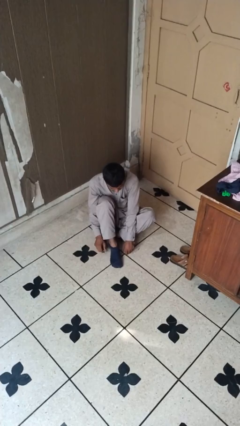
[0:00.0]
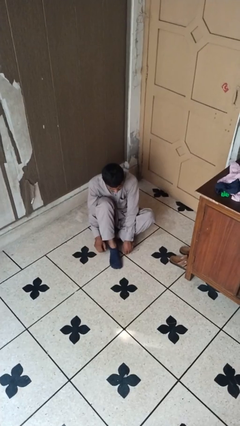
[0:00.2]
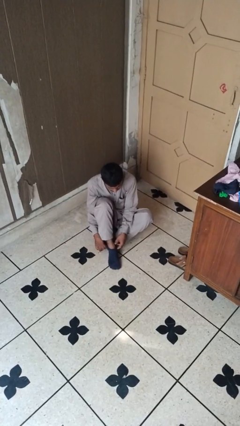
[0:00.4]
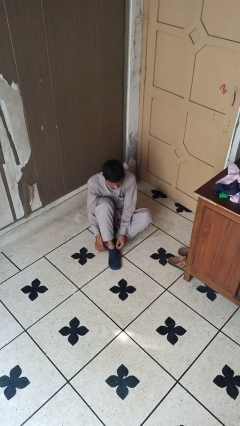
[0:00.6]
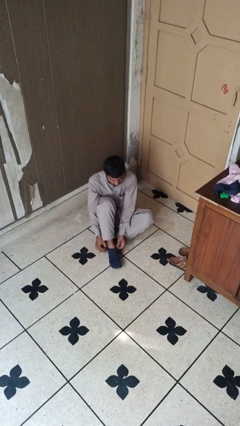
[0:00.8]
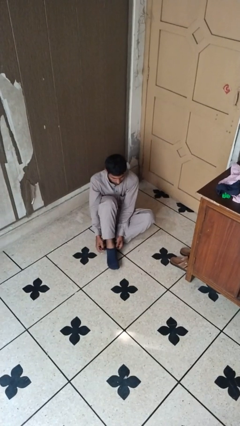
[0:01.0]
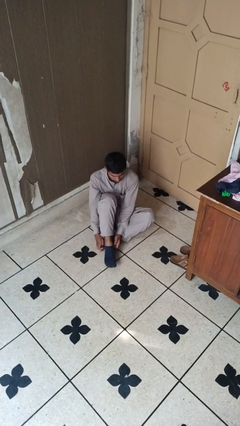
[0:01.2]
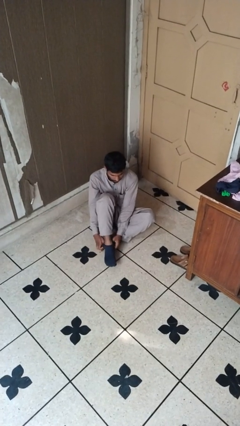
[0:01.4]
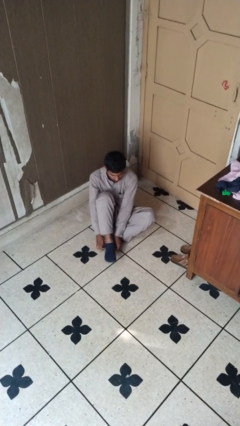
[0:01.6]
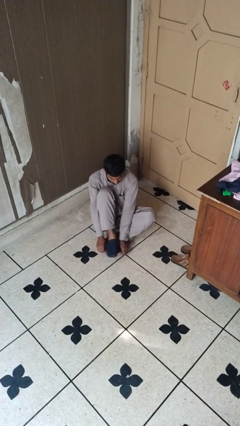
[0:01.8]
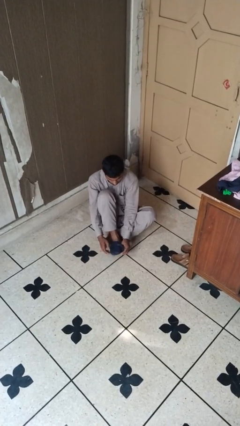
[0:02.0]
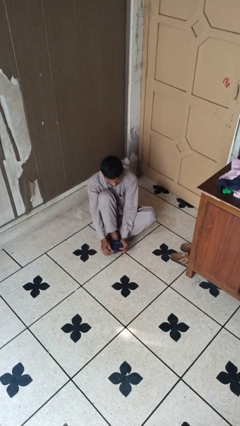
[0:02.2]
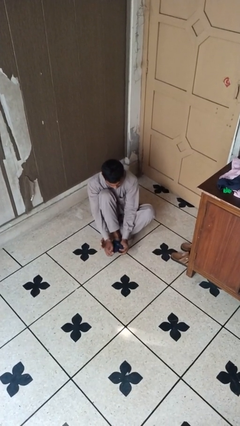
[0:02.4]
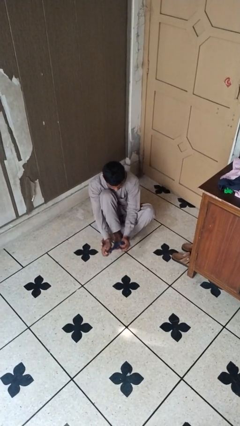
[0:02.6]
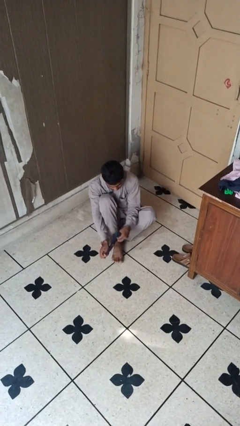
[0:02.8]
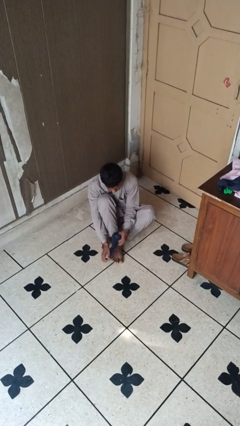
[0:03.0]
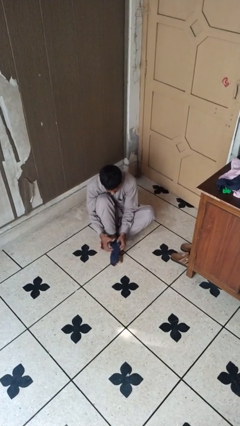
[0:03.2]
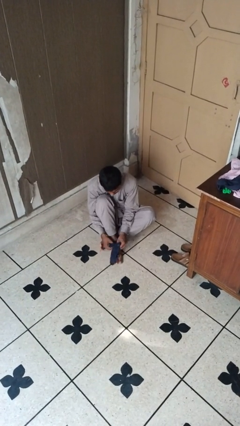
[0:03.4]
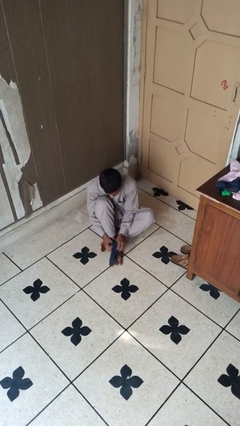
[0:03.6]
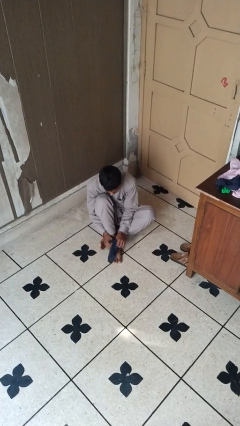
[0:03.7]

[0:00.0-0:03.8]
person takes off socks

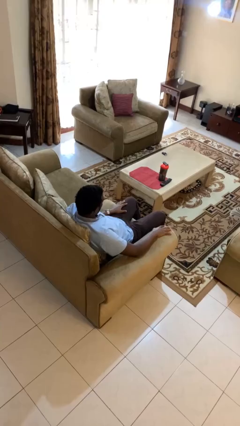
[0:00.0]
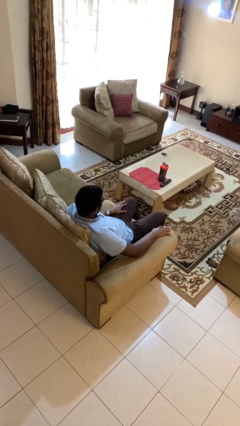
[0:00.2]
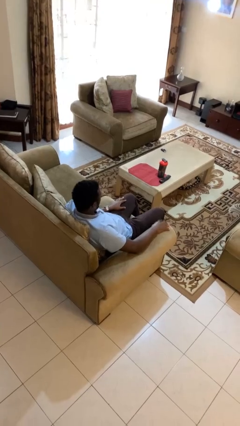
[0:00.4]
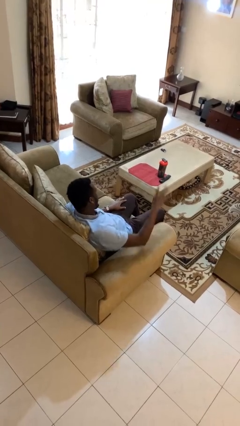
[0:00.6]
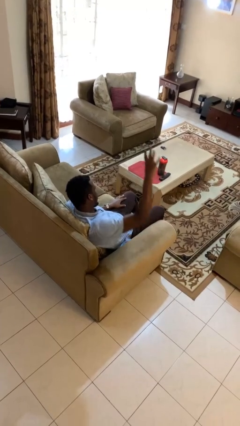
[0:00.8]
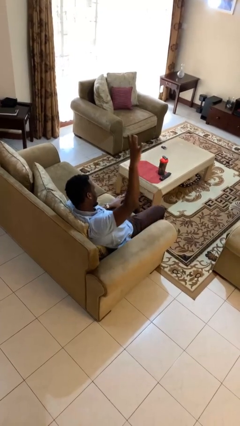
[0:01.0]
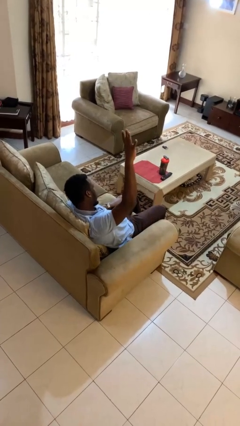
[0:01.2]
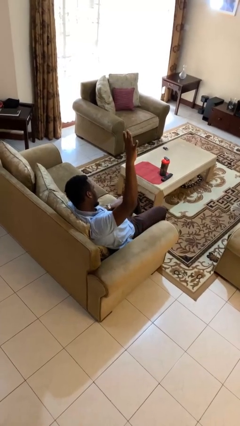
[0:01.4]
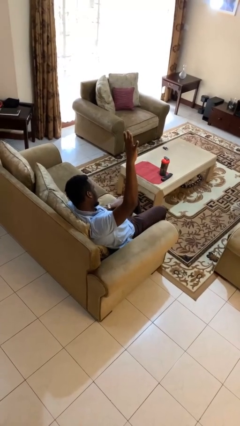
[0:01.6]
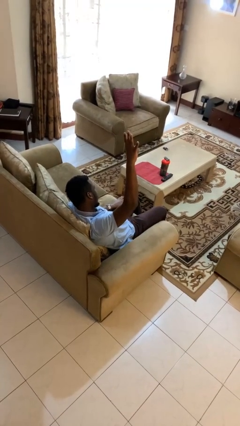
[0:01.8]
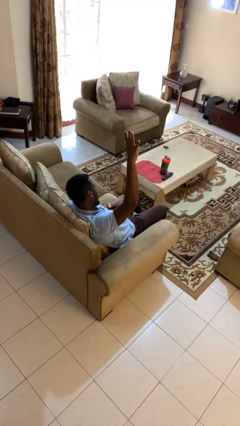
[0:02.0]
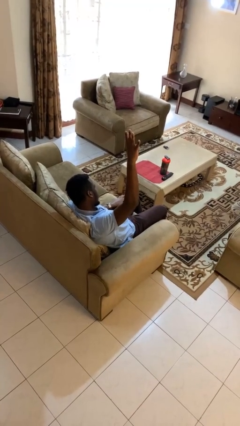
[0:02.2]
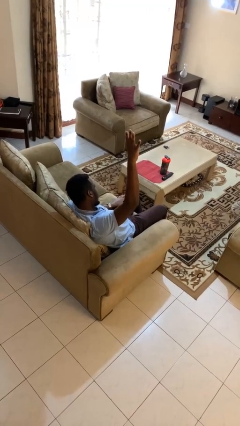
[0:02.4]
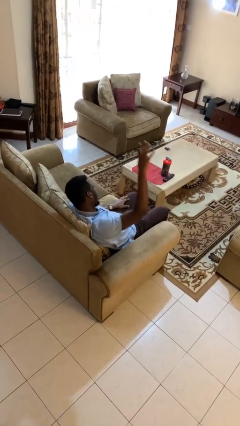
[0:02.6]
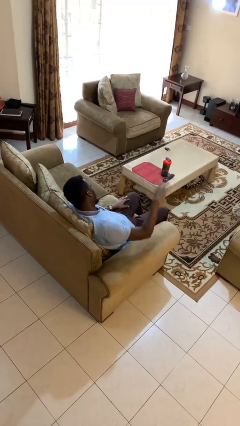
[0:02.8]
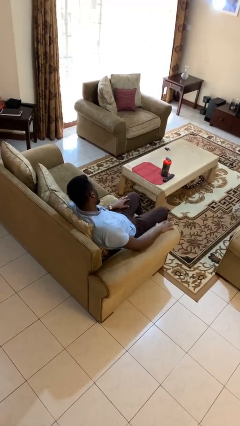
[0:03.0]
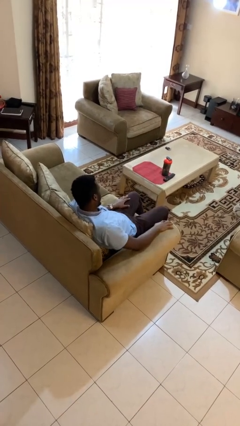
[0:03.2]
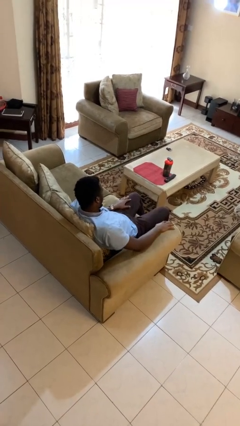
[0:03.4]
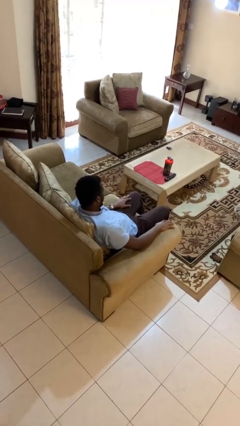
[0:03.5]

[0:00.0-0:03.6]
person gestures number four

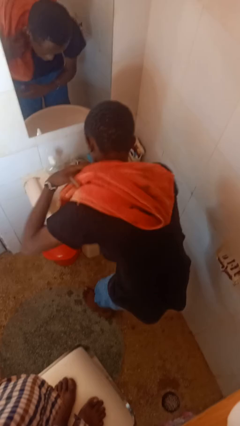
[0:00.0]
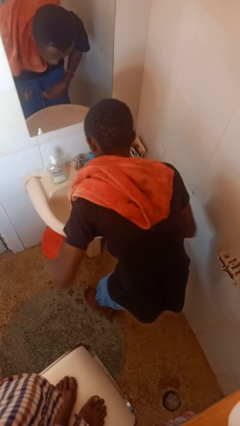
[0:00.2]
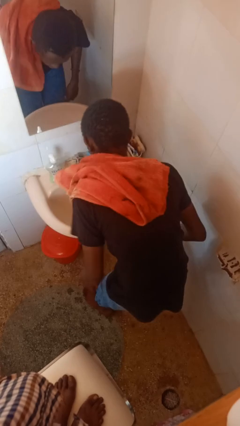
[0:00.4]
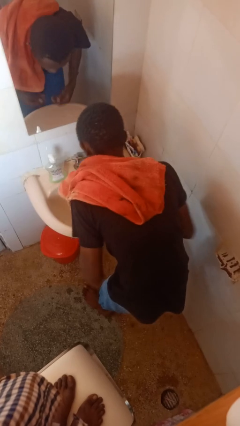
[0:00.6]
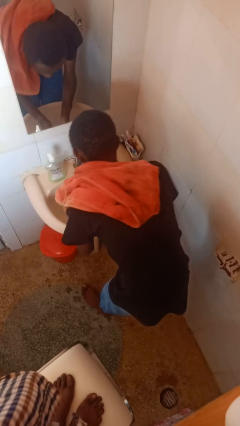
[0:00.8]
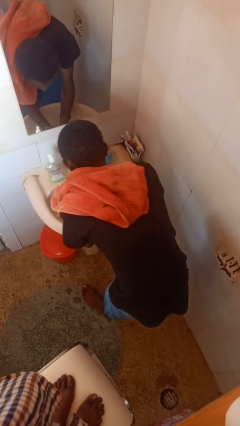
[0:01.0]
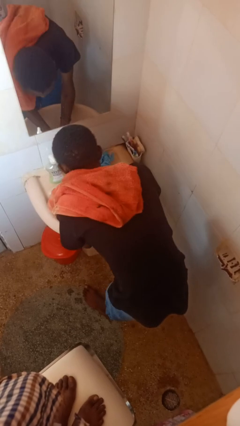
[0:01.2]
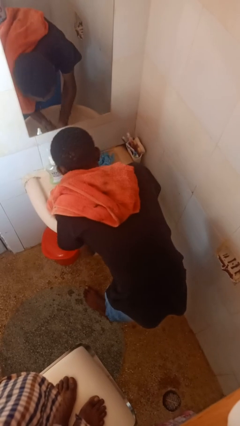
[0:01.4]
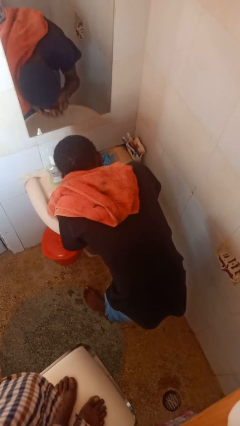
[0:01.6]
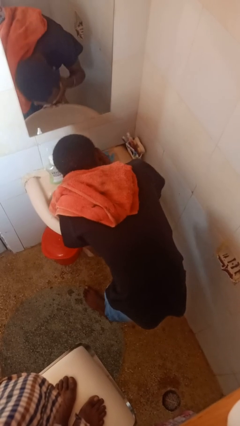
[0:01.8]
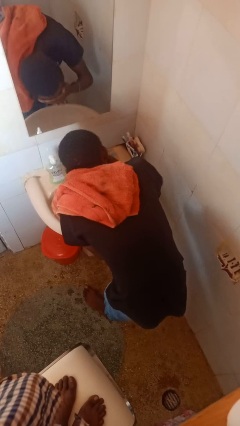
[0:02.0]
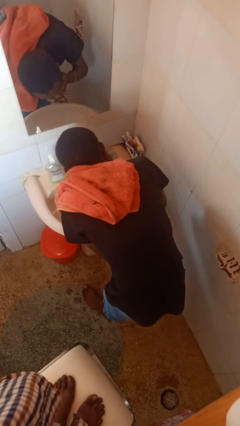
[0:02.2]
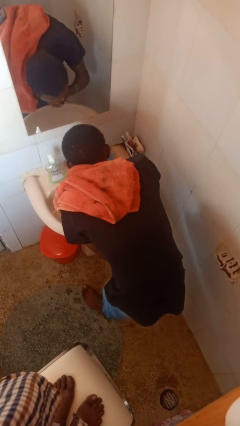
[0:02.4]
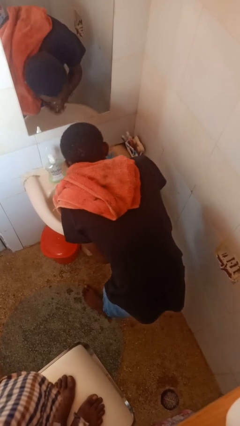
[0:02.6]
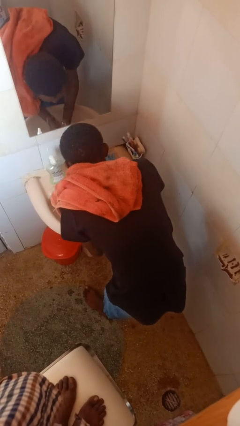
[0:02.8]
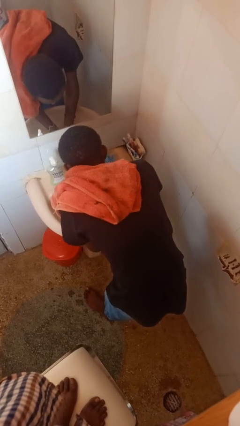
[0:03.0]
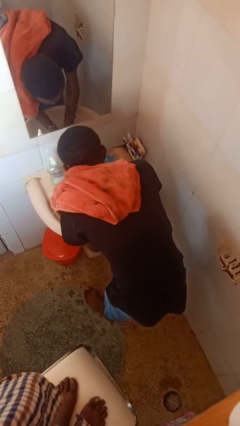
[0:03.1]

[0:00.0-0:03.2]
person washes face

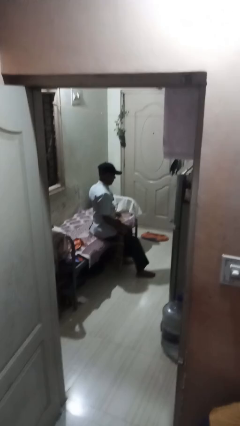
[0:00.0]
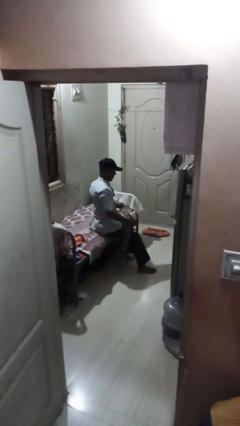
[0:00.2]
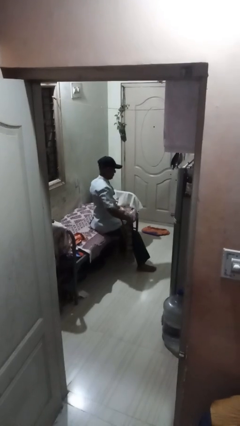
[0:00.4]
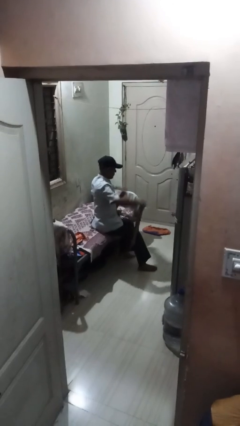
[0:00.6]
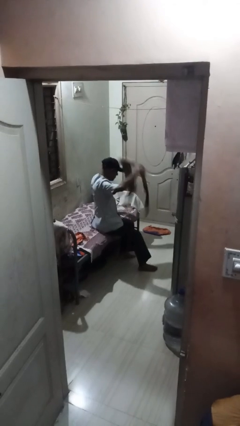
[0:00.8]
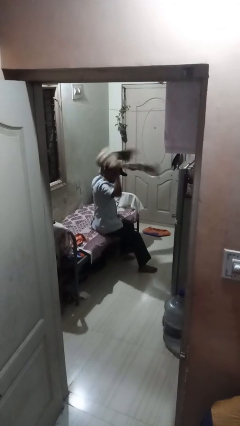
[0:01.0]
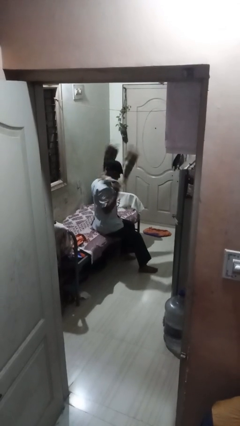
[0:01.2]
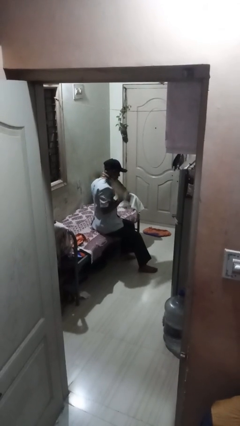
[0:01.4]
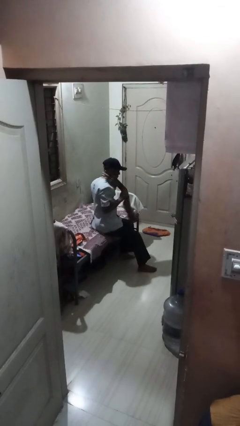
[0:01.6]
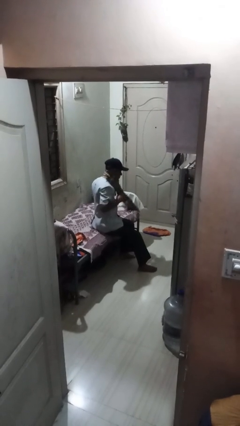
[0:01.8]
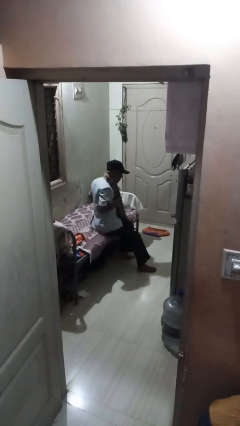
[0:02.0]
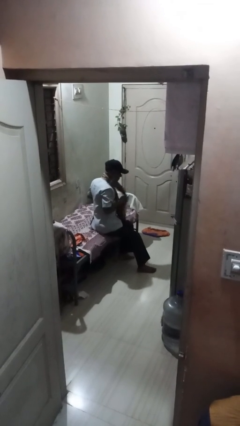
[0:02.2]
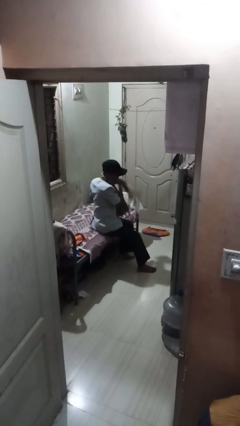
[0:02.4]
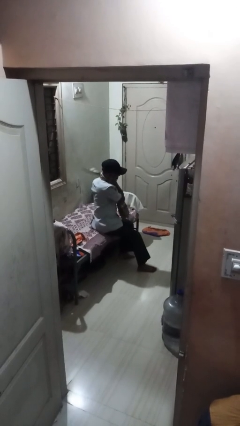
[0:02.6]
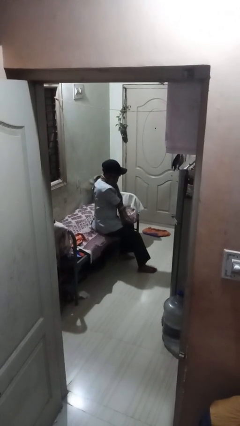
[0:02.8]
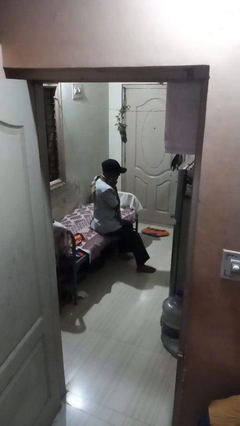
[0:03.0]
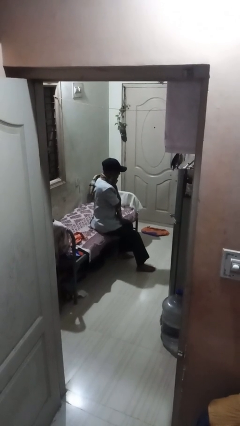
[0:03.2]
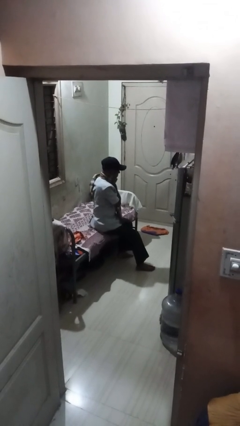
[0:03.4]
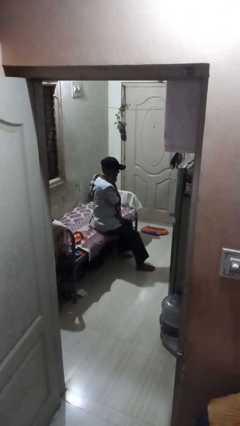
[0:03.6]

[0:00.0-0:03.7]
person puts on scarf

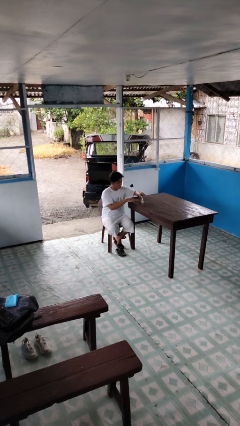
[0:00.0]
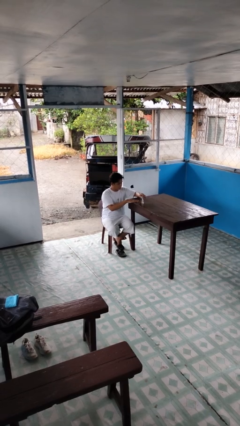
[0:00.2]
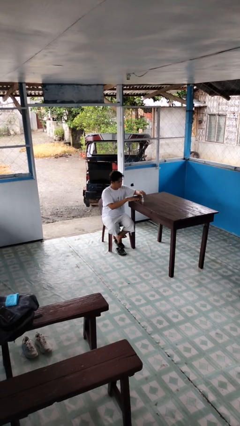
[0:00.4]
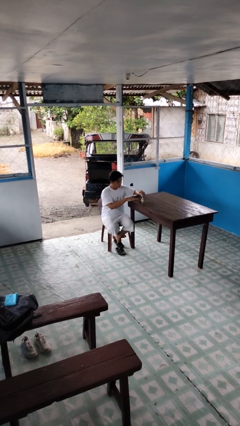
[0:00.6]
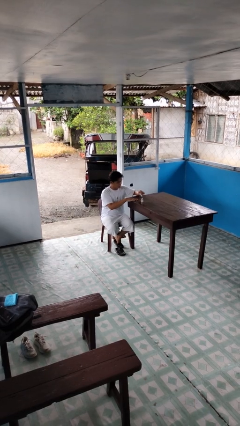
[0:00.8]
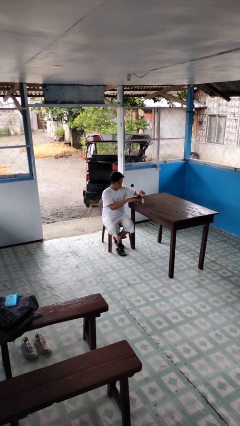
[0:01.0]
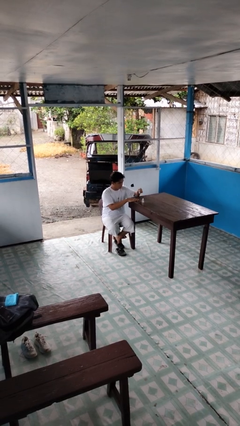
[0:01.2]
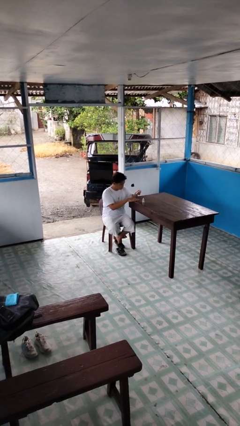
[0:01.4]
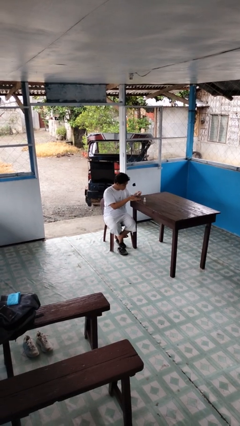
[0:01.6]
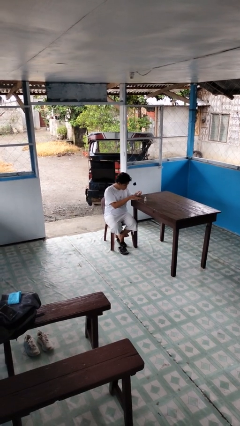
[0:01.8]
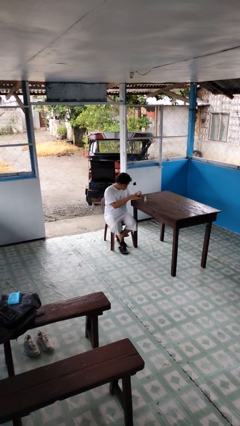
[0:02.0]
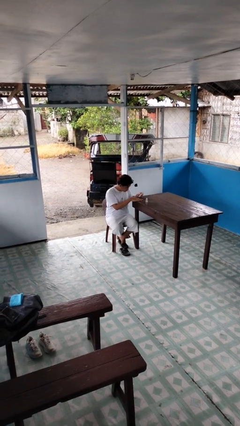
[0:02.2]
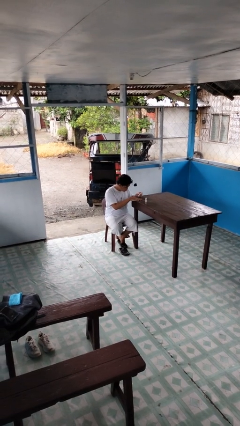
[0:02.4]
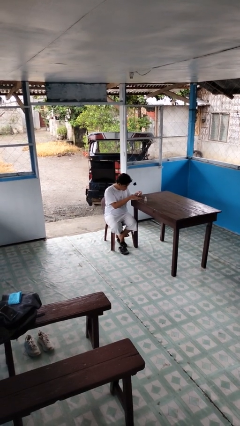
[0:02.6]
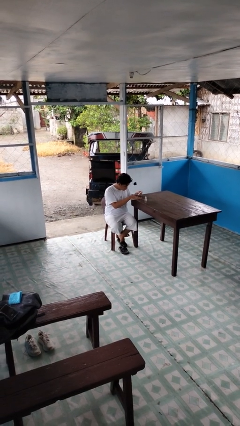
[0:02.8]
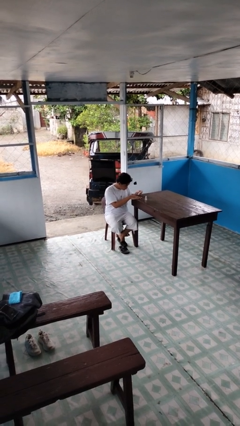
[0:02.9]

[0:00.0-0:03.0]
person paints fingernails
